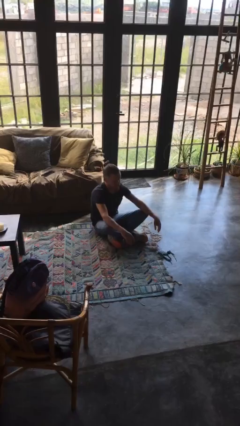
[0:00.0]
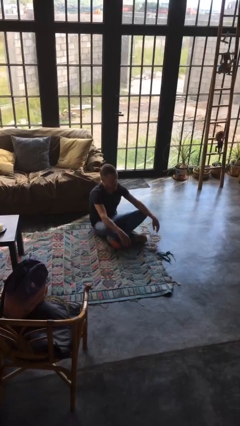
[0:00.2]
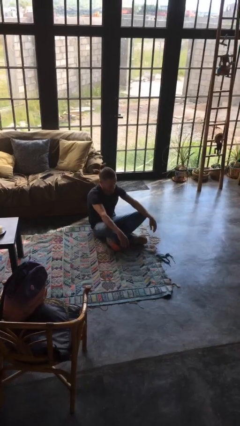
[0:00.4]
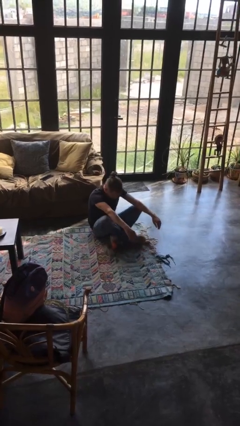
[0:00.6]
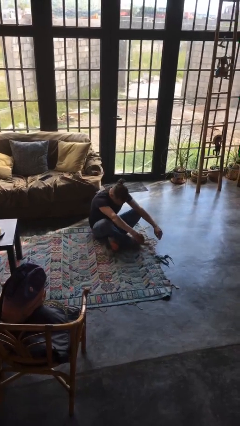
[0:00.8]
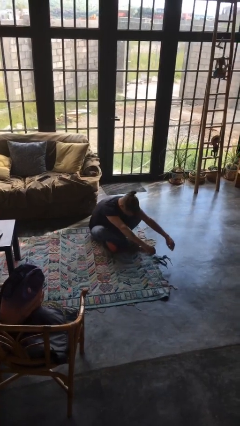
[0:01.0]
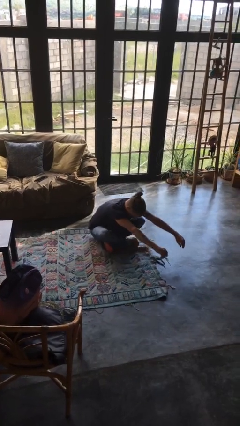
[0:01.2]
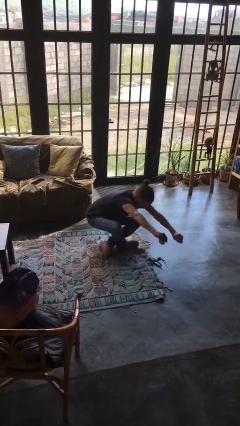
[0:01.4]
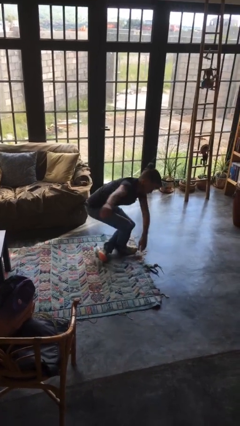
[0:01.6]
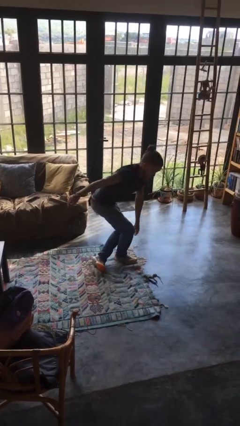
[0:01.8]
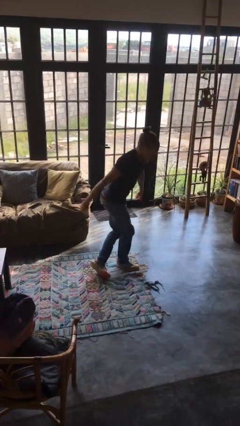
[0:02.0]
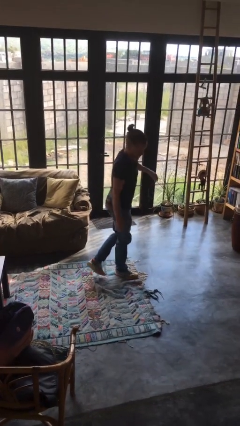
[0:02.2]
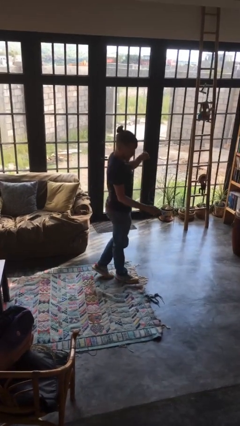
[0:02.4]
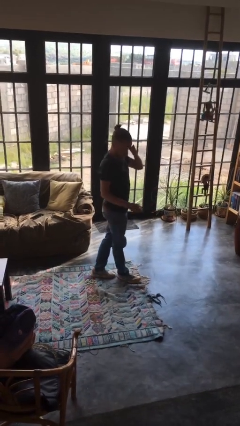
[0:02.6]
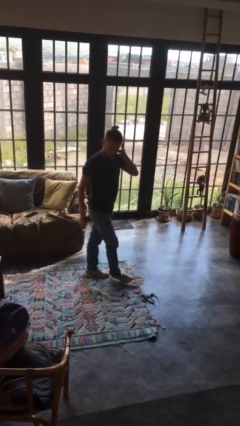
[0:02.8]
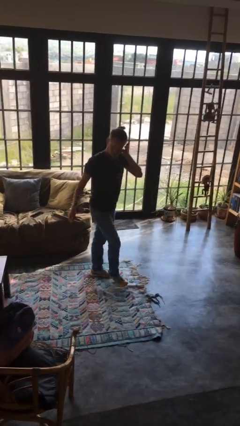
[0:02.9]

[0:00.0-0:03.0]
person stands up from floor

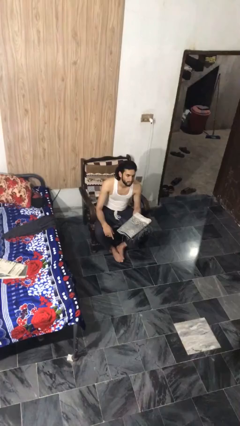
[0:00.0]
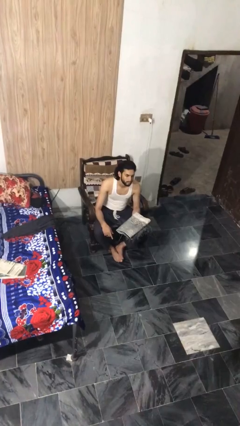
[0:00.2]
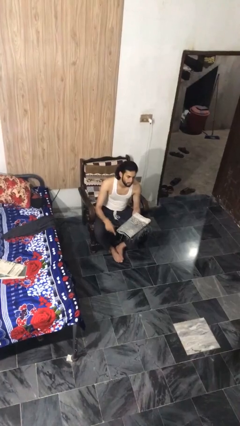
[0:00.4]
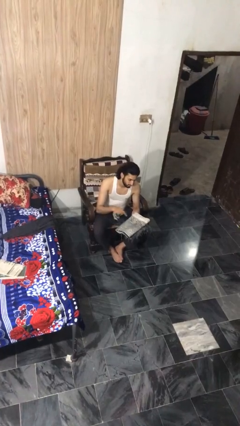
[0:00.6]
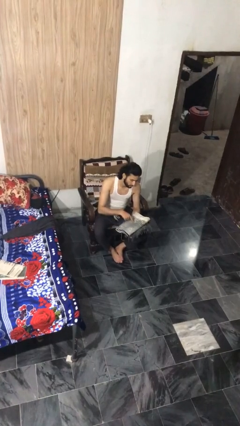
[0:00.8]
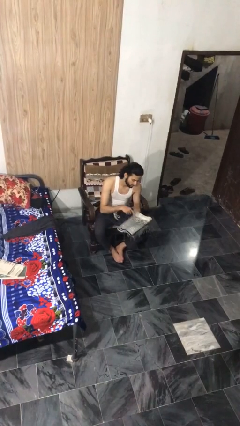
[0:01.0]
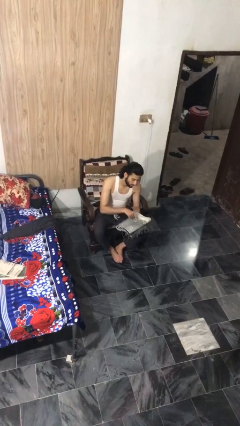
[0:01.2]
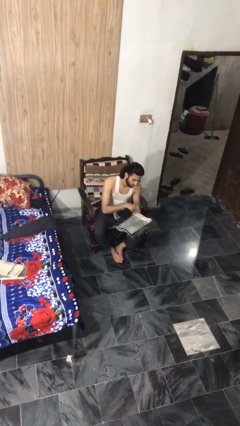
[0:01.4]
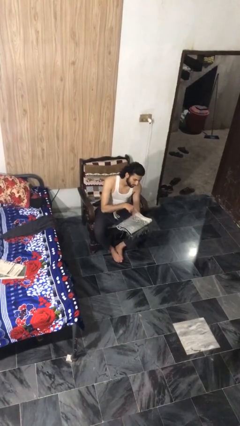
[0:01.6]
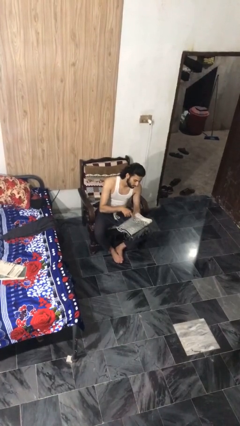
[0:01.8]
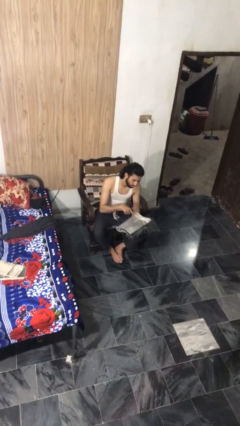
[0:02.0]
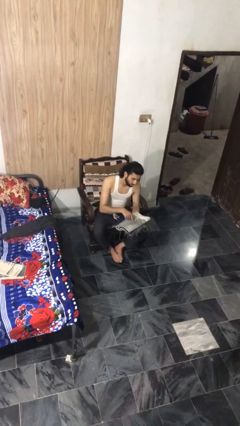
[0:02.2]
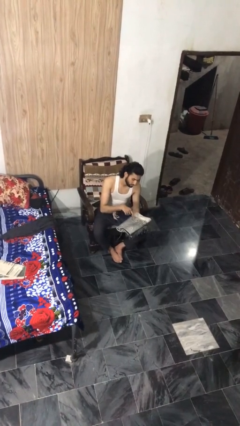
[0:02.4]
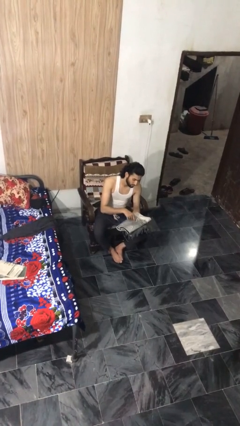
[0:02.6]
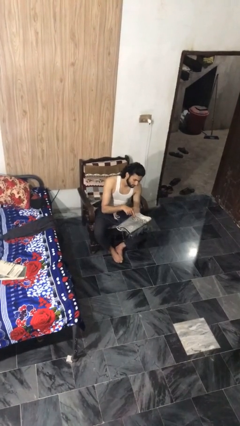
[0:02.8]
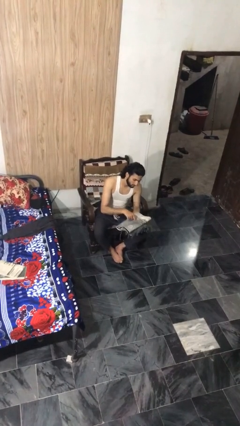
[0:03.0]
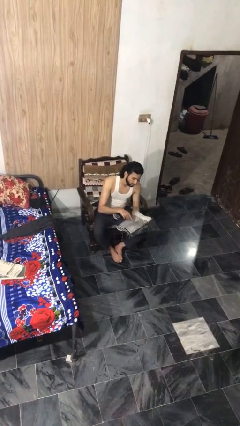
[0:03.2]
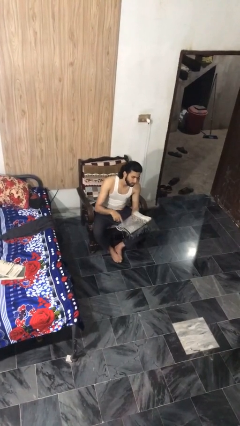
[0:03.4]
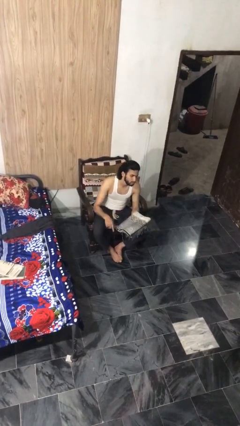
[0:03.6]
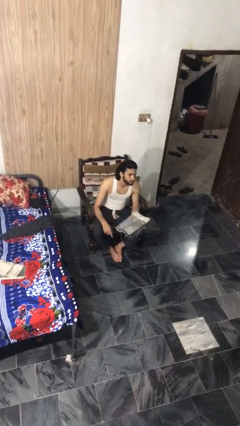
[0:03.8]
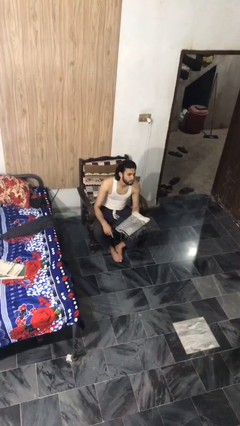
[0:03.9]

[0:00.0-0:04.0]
person taps object with finger

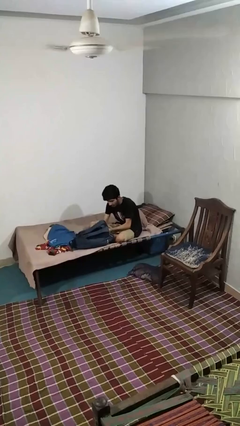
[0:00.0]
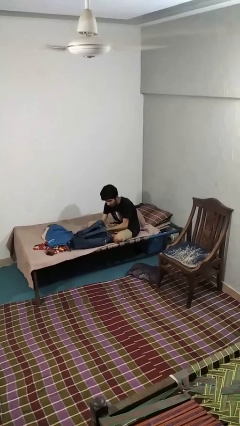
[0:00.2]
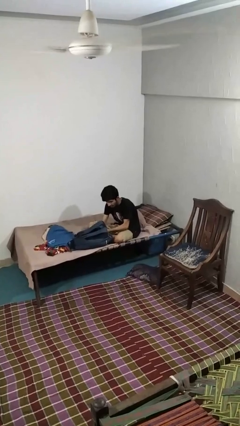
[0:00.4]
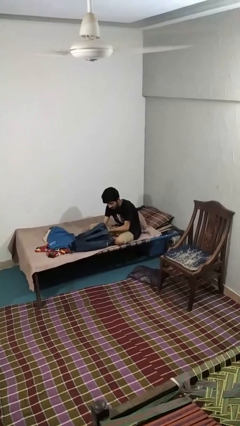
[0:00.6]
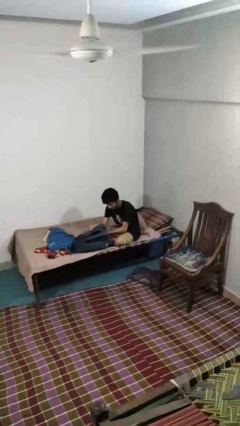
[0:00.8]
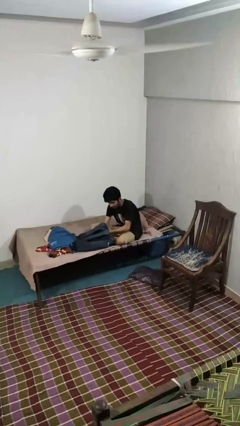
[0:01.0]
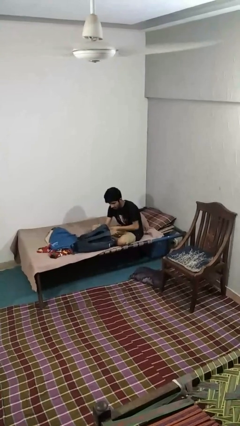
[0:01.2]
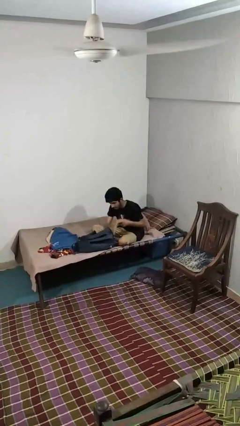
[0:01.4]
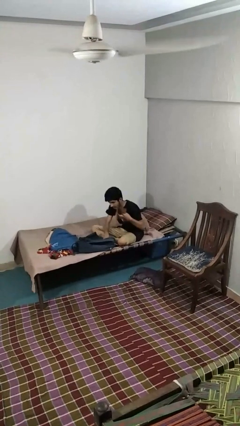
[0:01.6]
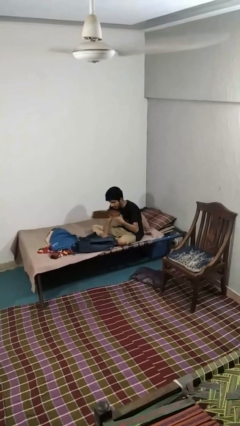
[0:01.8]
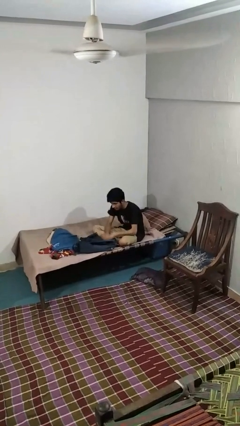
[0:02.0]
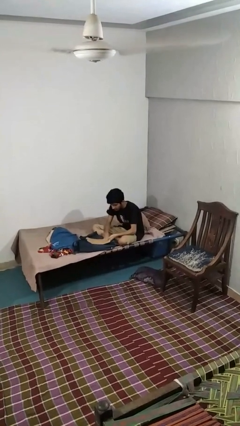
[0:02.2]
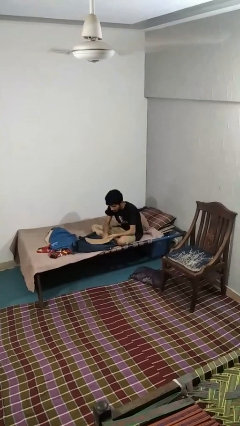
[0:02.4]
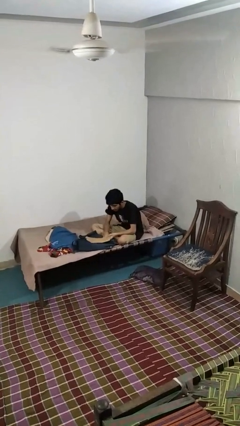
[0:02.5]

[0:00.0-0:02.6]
person takes object from backpack

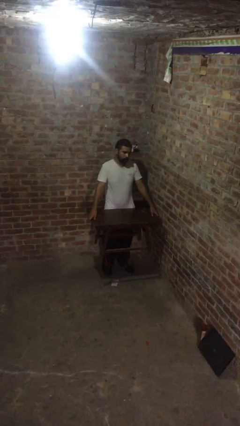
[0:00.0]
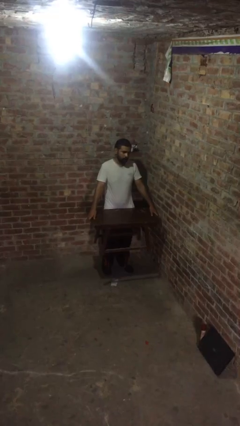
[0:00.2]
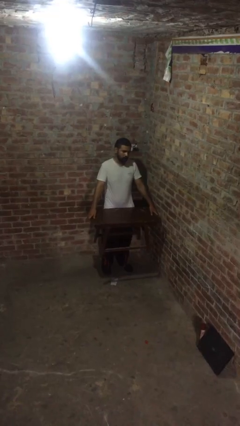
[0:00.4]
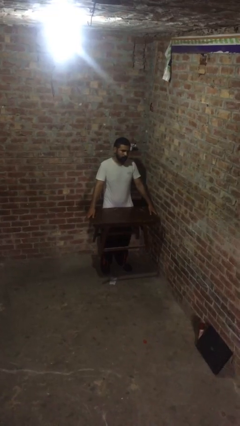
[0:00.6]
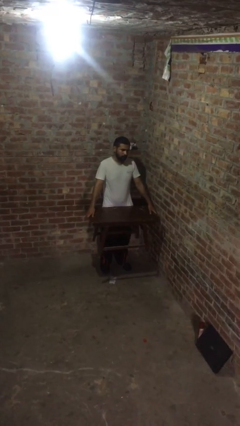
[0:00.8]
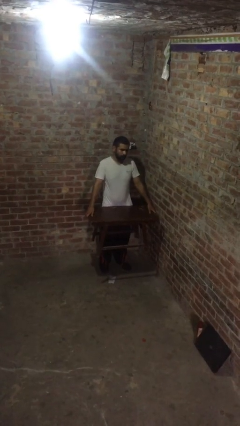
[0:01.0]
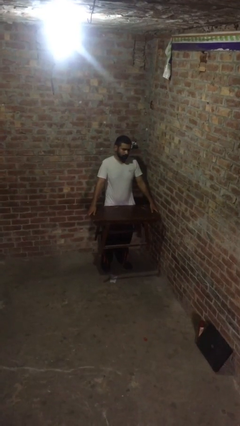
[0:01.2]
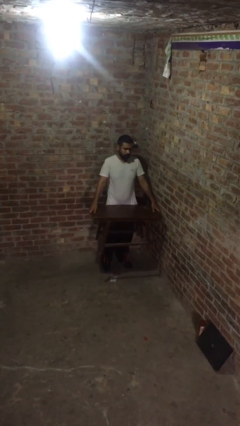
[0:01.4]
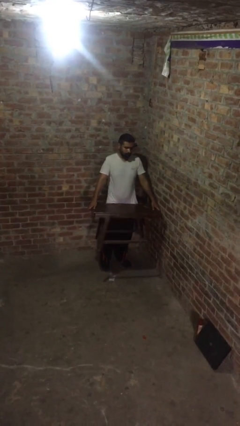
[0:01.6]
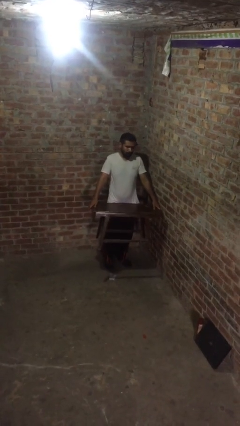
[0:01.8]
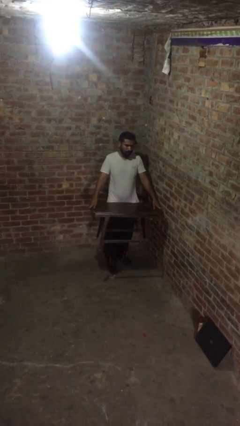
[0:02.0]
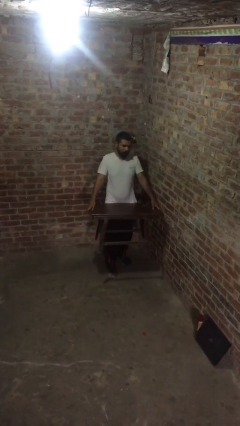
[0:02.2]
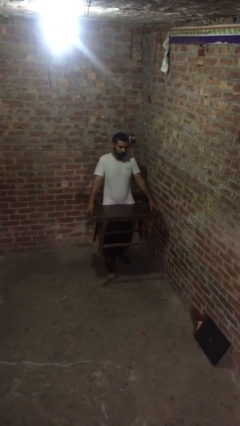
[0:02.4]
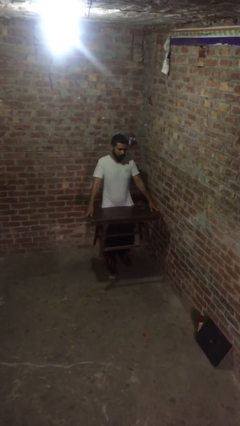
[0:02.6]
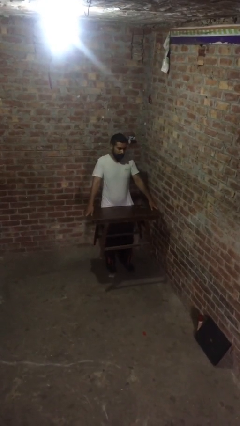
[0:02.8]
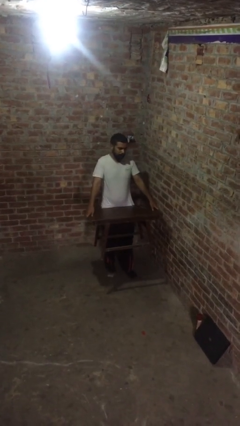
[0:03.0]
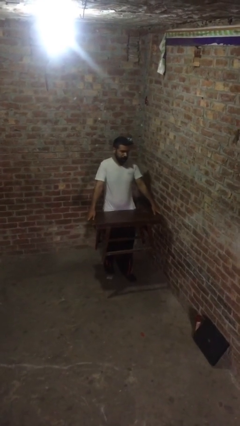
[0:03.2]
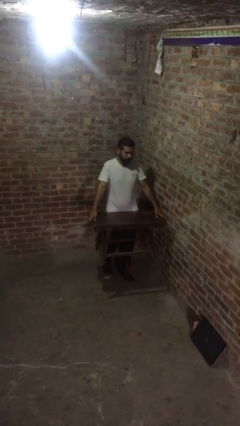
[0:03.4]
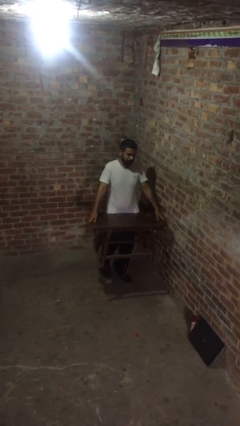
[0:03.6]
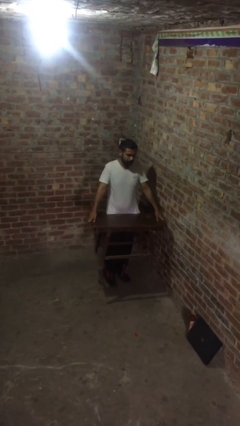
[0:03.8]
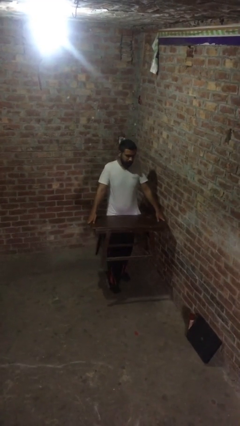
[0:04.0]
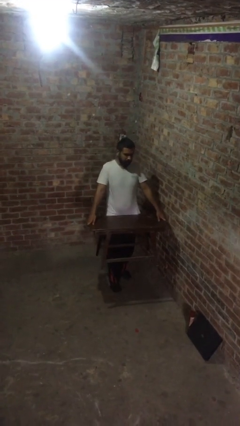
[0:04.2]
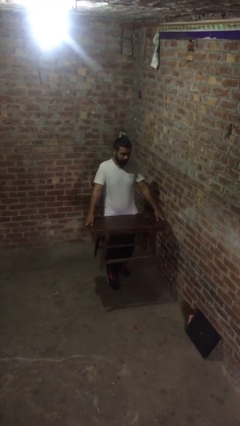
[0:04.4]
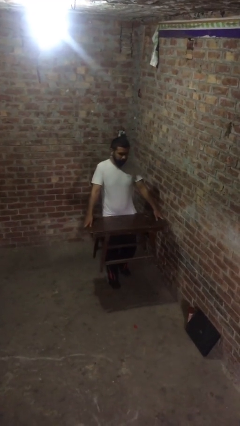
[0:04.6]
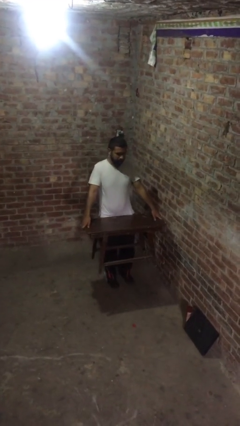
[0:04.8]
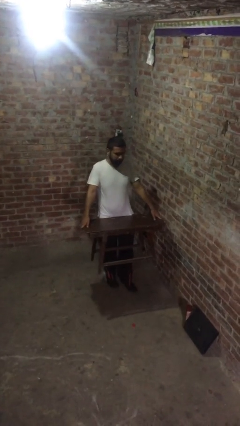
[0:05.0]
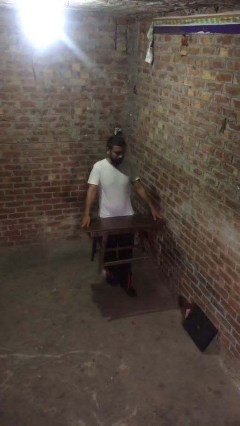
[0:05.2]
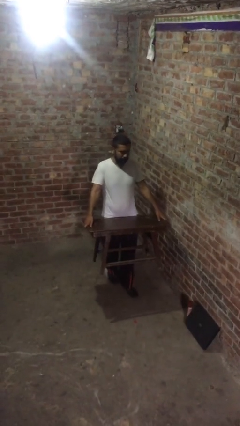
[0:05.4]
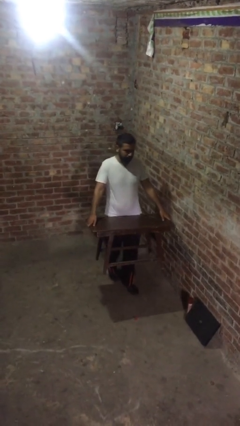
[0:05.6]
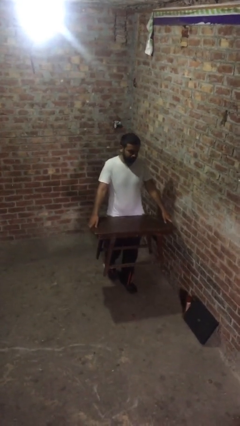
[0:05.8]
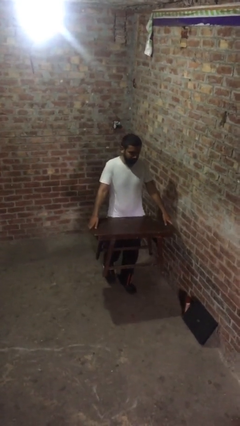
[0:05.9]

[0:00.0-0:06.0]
person carries heavy object

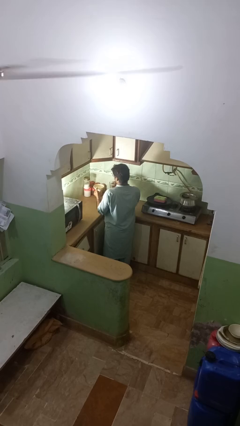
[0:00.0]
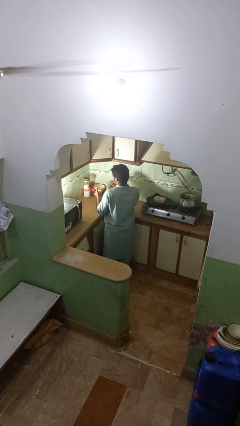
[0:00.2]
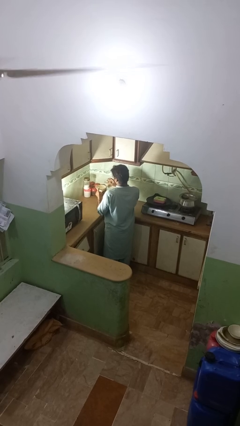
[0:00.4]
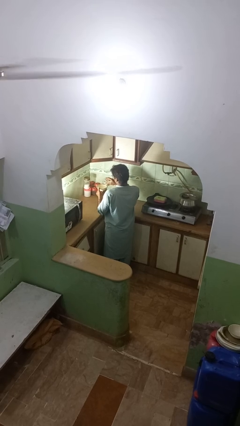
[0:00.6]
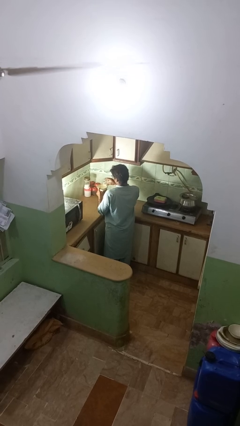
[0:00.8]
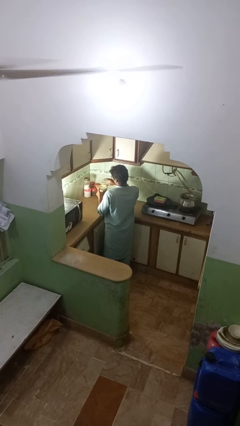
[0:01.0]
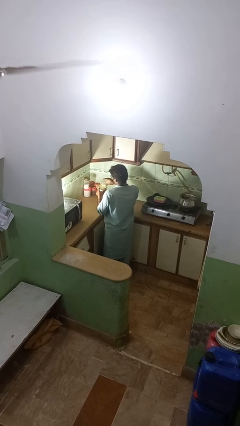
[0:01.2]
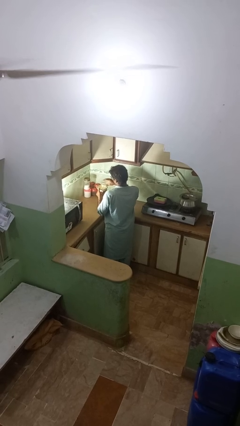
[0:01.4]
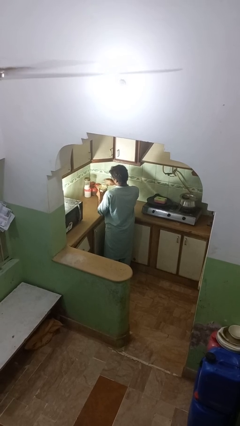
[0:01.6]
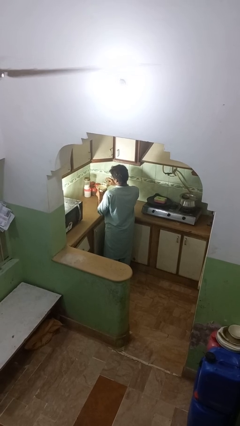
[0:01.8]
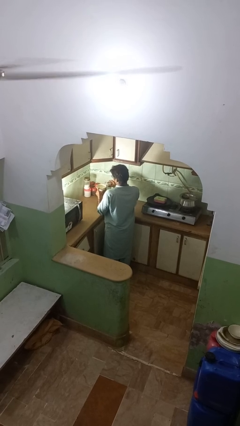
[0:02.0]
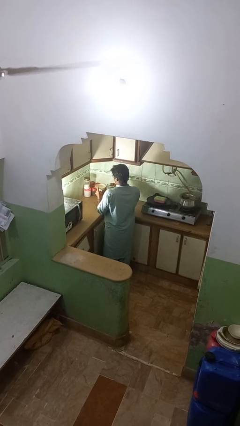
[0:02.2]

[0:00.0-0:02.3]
person pours into bowl
